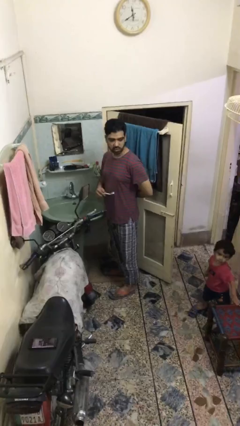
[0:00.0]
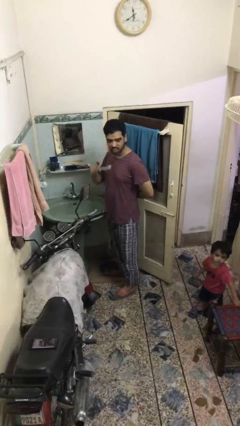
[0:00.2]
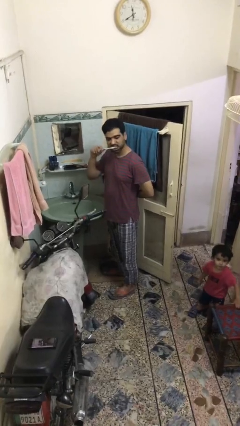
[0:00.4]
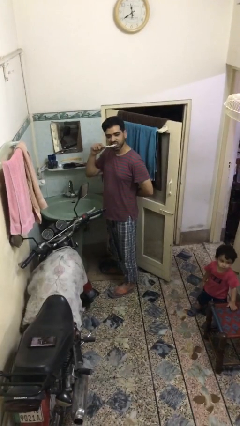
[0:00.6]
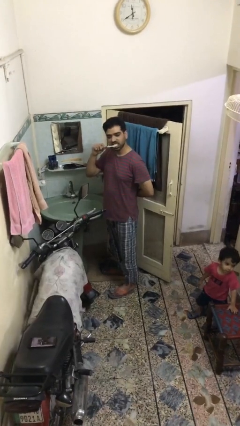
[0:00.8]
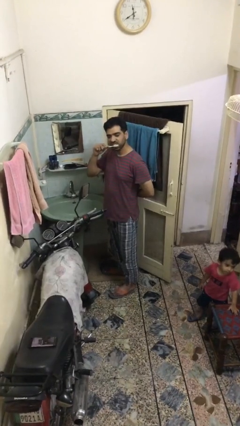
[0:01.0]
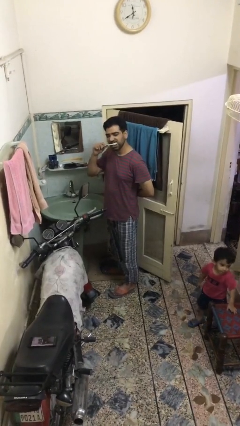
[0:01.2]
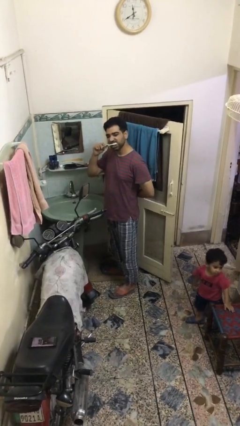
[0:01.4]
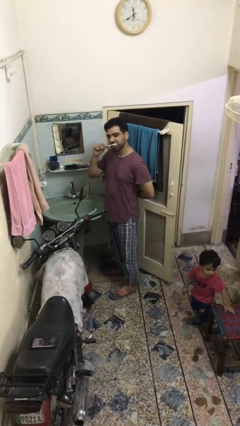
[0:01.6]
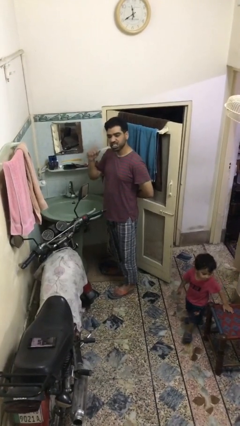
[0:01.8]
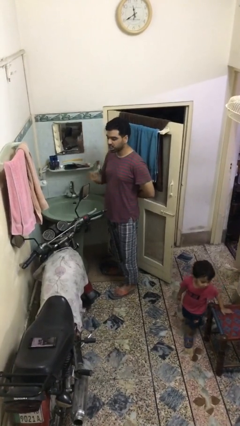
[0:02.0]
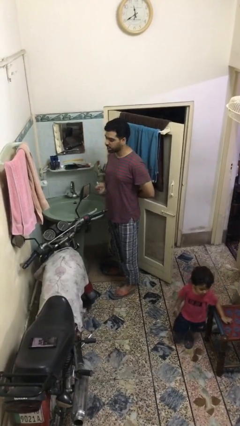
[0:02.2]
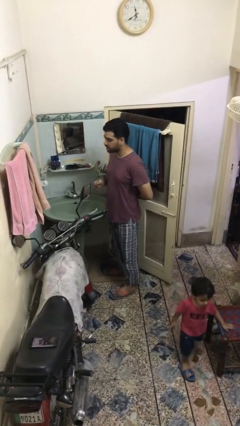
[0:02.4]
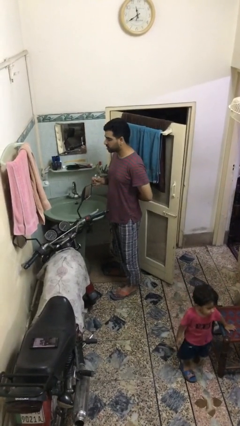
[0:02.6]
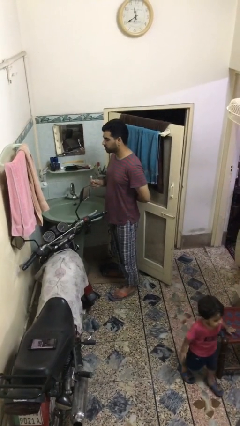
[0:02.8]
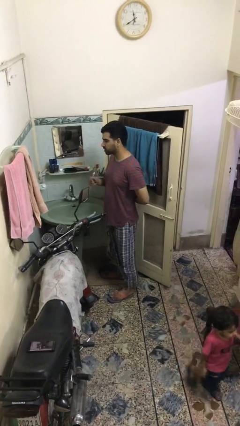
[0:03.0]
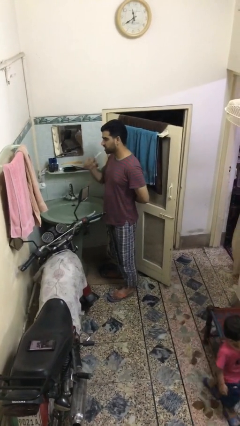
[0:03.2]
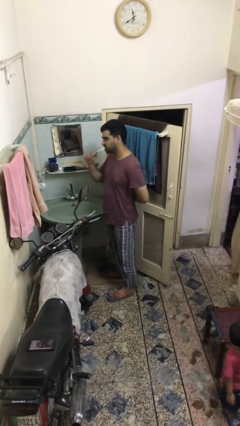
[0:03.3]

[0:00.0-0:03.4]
person brushes teeth

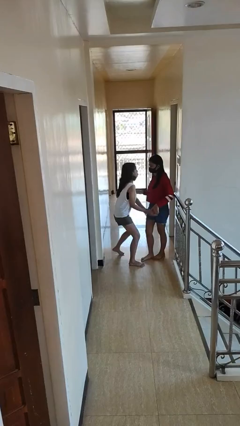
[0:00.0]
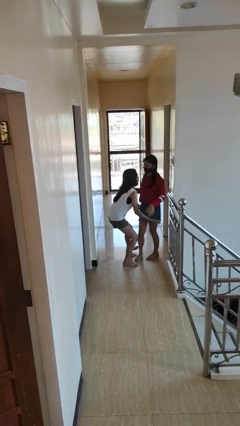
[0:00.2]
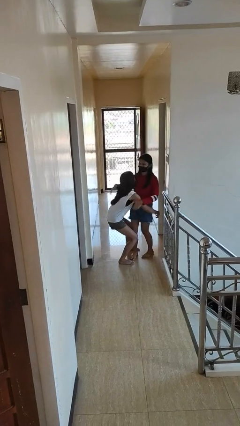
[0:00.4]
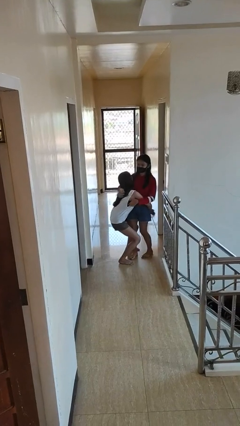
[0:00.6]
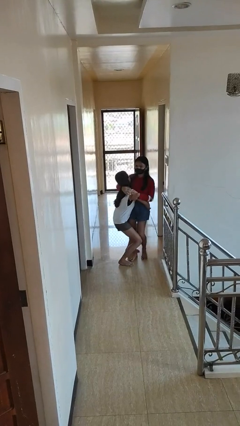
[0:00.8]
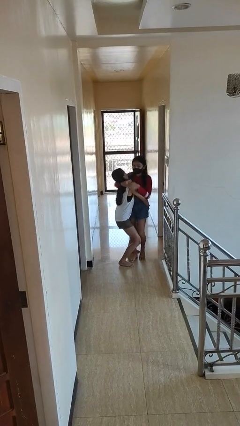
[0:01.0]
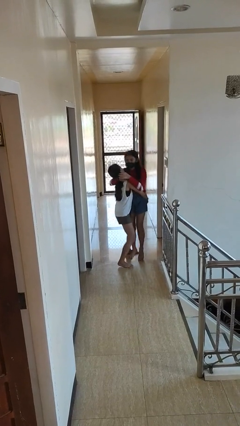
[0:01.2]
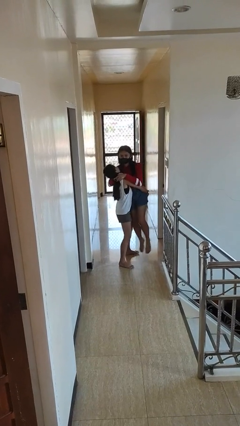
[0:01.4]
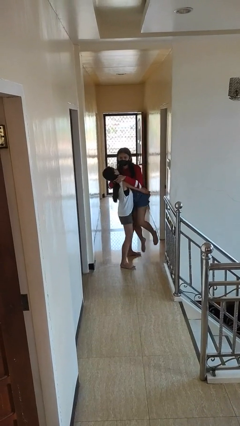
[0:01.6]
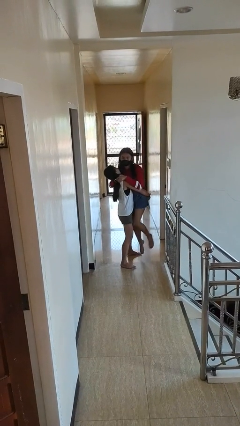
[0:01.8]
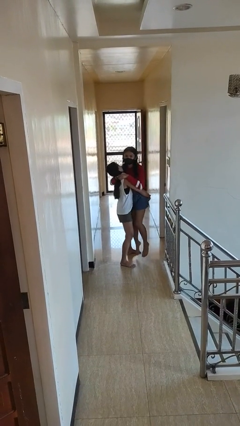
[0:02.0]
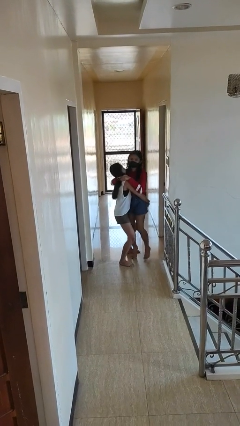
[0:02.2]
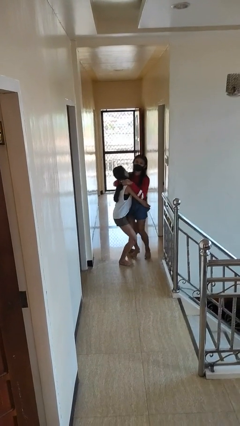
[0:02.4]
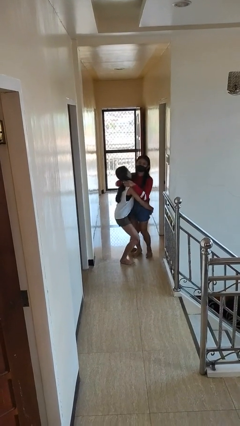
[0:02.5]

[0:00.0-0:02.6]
person picks up person

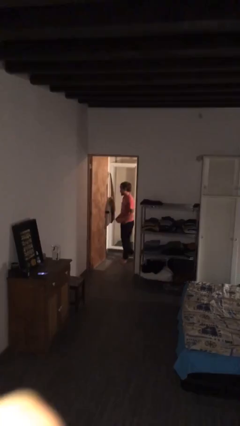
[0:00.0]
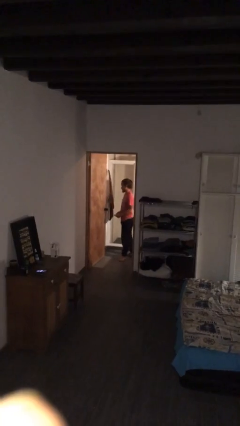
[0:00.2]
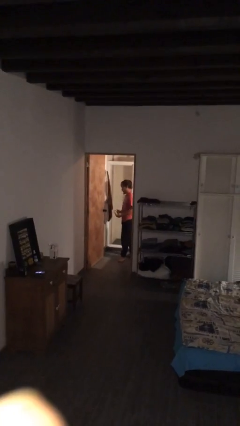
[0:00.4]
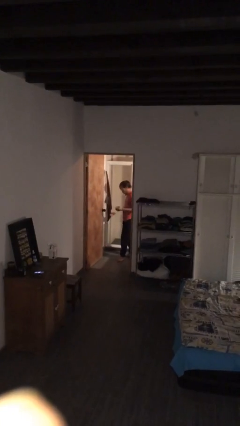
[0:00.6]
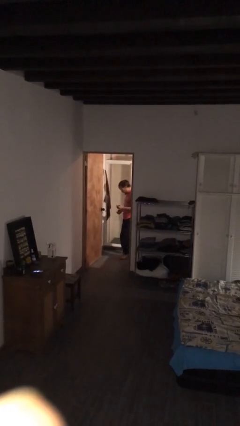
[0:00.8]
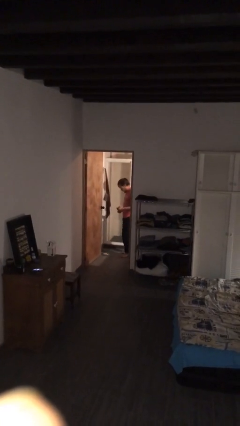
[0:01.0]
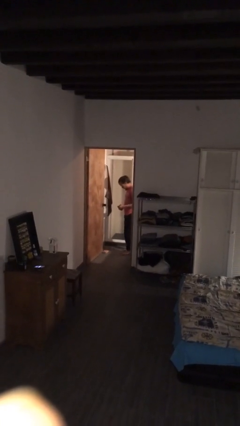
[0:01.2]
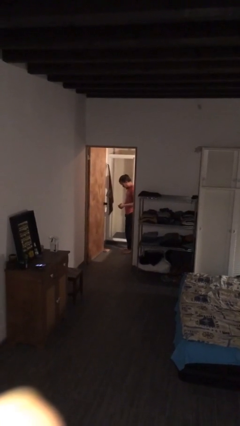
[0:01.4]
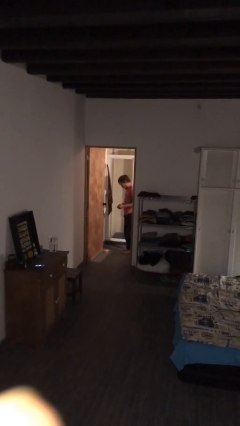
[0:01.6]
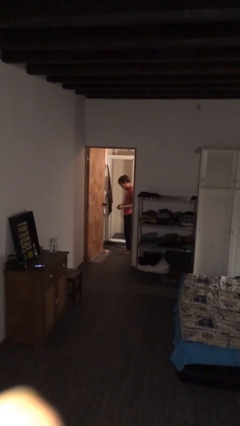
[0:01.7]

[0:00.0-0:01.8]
person drops object

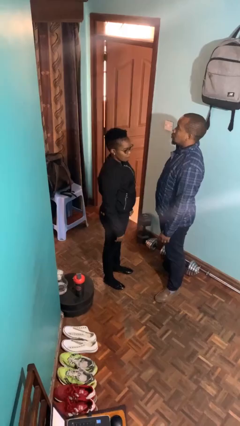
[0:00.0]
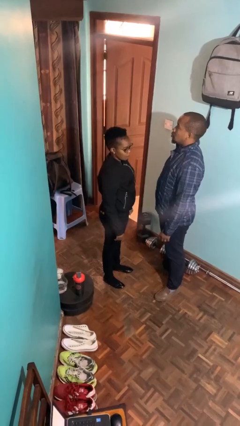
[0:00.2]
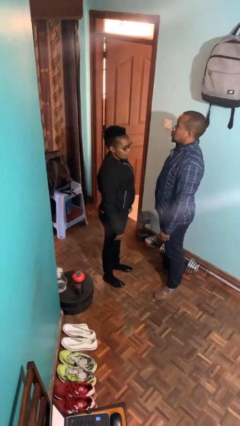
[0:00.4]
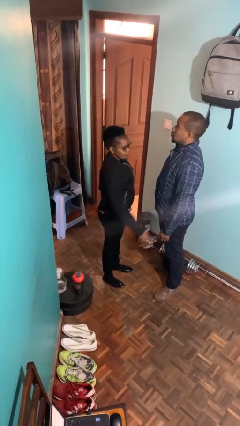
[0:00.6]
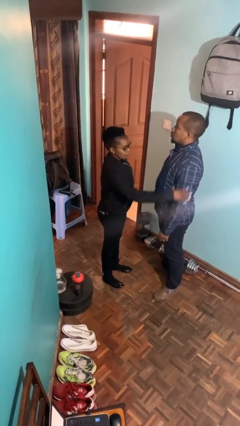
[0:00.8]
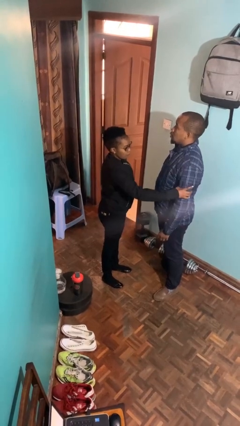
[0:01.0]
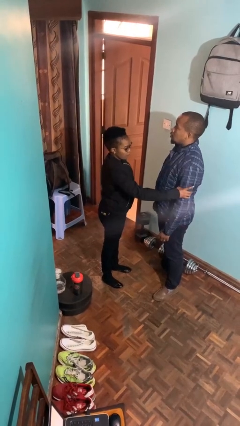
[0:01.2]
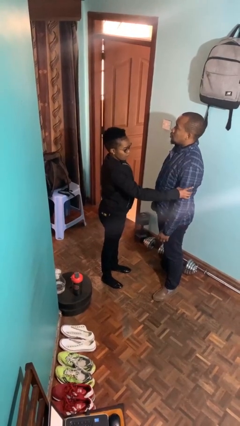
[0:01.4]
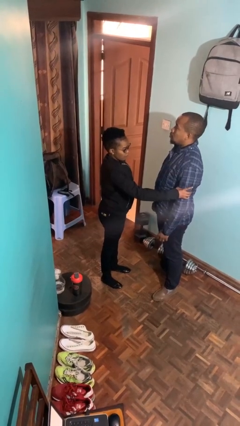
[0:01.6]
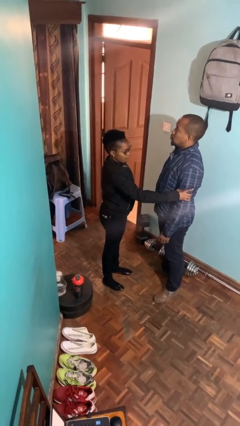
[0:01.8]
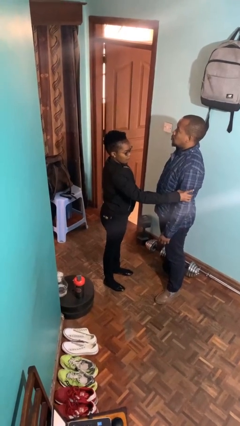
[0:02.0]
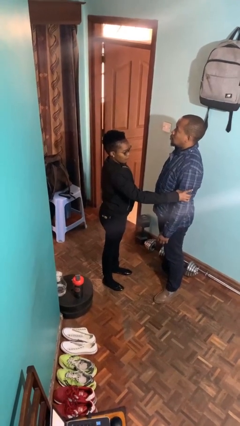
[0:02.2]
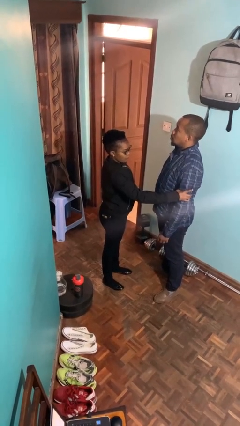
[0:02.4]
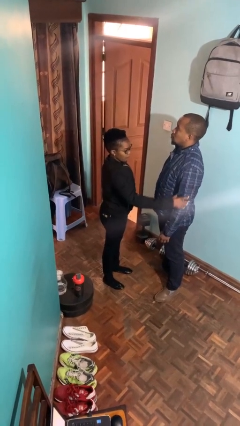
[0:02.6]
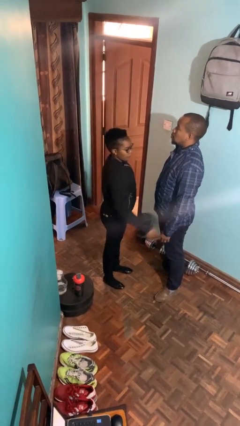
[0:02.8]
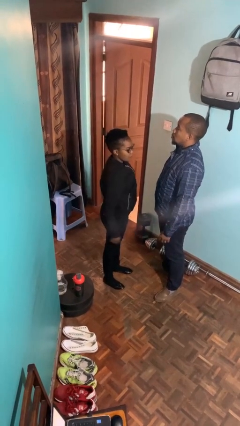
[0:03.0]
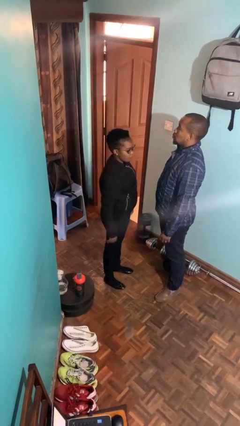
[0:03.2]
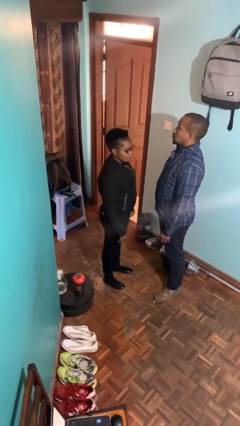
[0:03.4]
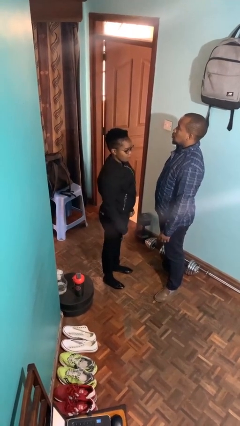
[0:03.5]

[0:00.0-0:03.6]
person grabs person by bicep

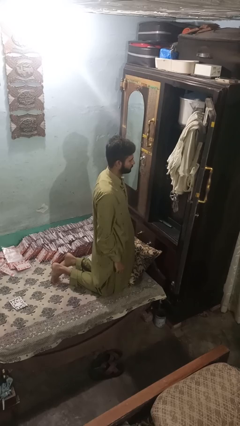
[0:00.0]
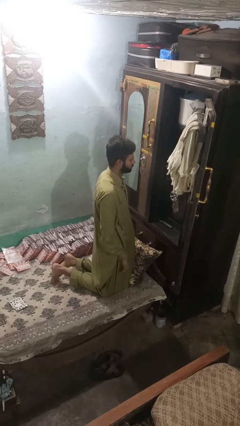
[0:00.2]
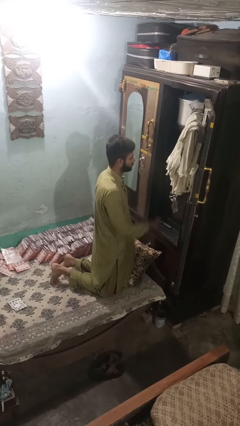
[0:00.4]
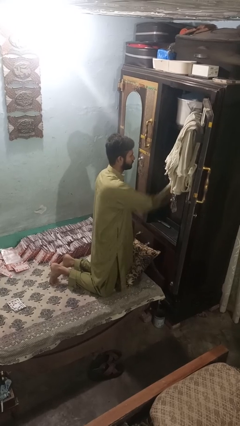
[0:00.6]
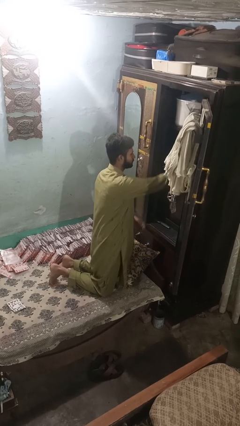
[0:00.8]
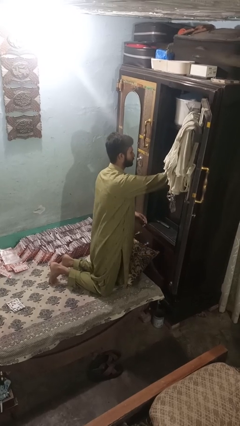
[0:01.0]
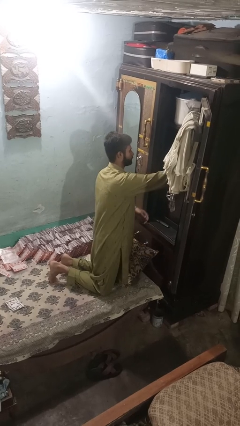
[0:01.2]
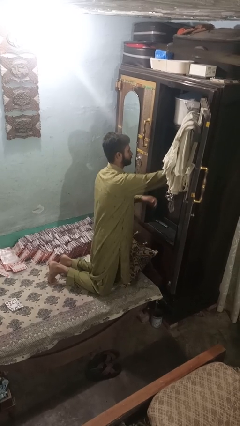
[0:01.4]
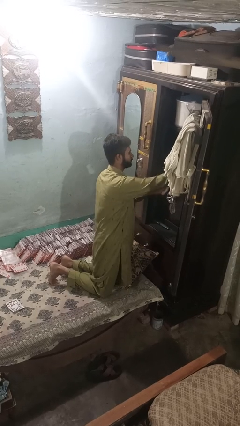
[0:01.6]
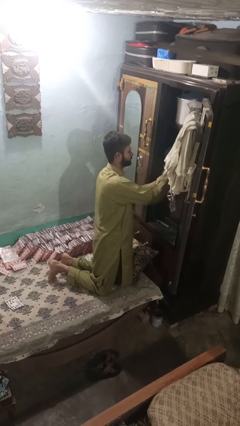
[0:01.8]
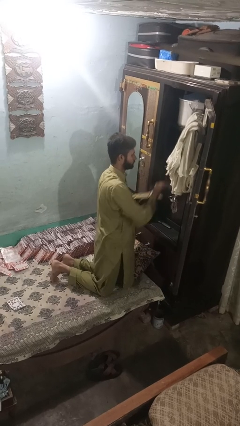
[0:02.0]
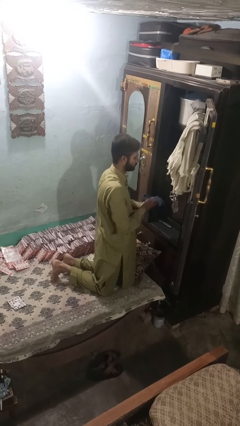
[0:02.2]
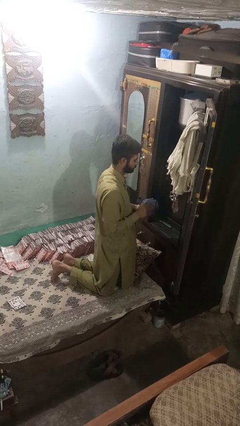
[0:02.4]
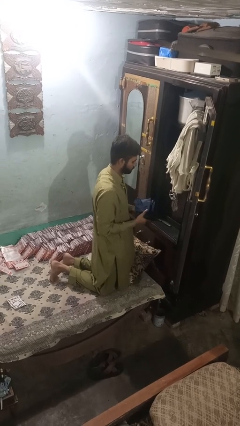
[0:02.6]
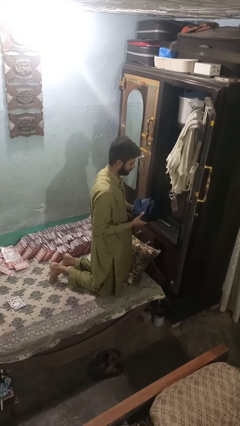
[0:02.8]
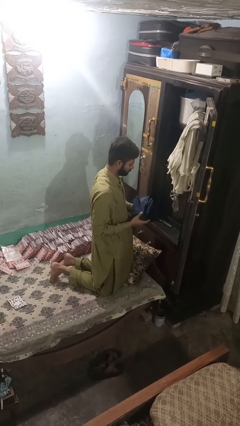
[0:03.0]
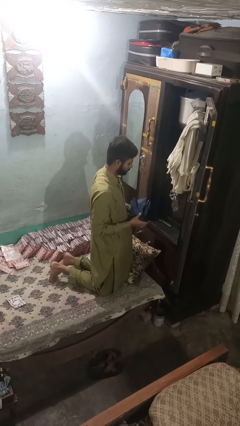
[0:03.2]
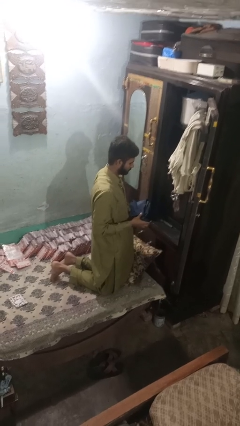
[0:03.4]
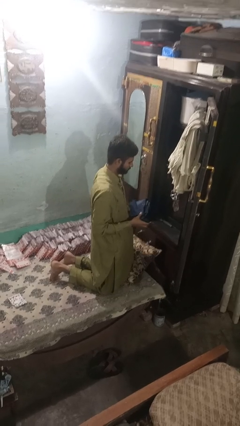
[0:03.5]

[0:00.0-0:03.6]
person takes clothes from dresser

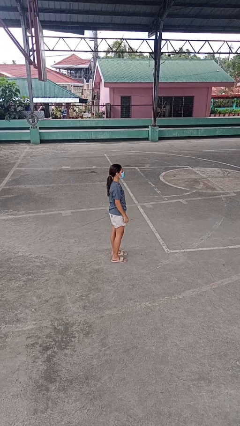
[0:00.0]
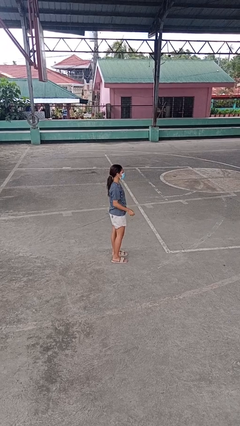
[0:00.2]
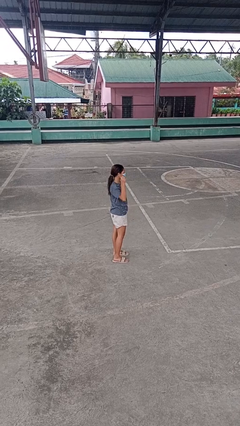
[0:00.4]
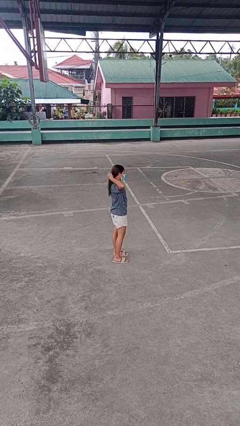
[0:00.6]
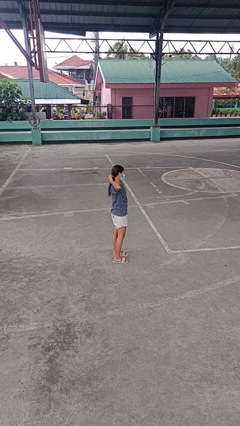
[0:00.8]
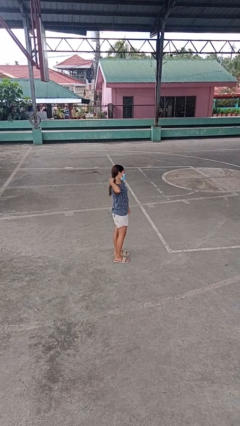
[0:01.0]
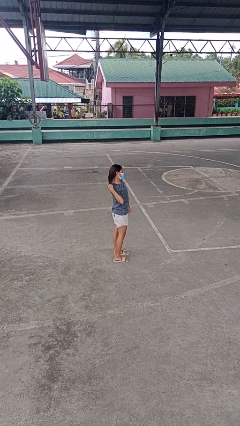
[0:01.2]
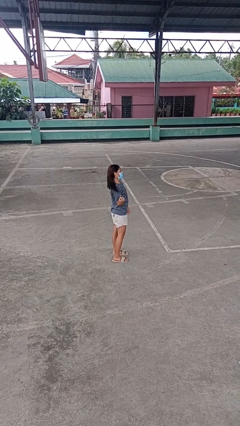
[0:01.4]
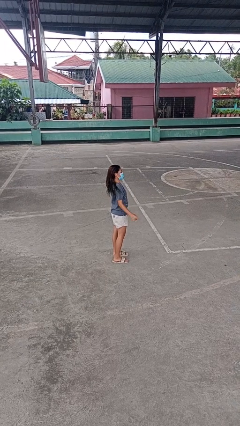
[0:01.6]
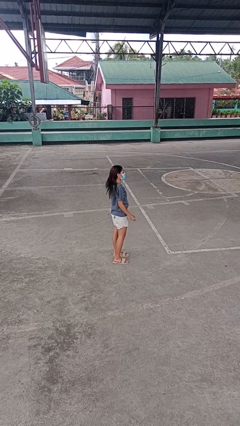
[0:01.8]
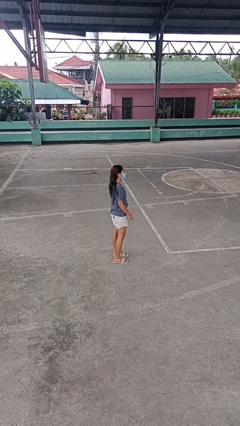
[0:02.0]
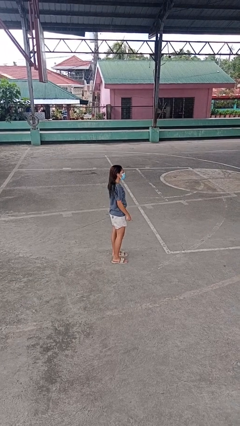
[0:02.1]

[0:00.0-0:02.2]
person takes off hairtie

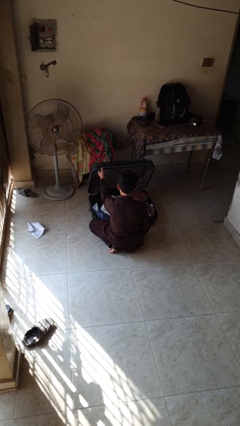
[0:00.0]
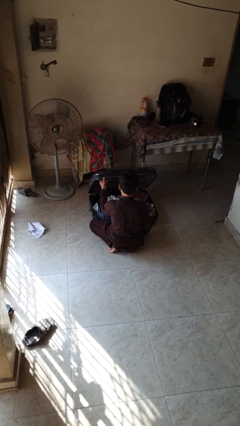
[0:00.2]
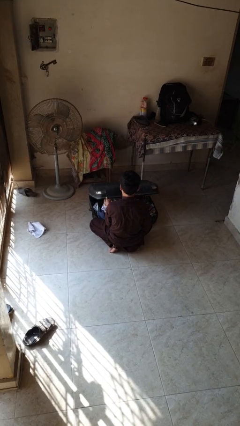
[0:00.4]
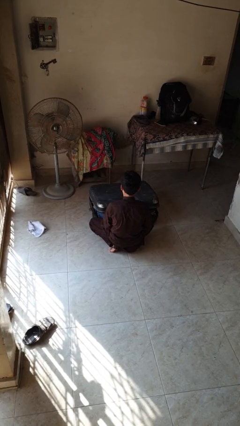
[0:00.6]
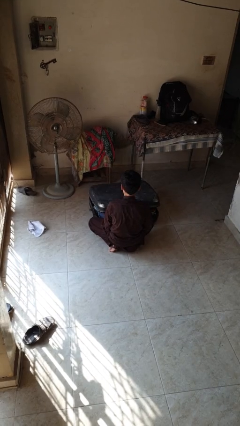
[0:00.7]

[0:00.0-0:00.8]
person closes suitcase
